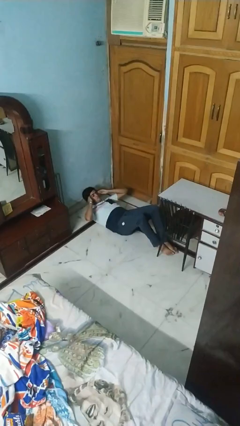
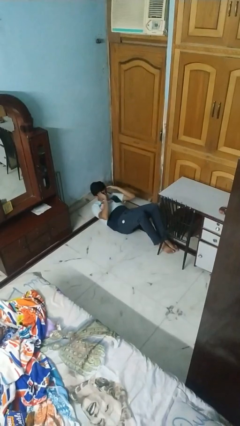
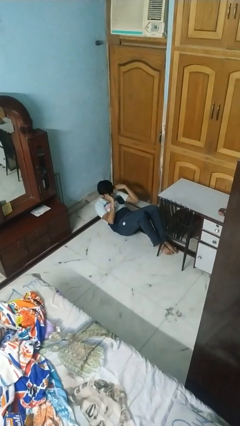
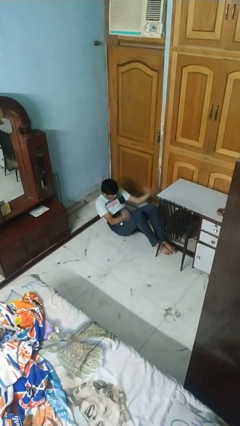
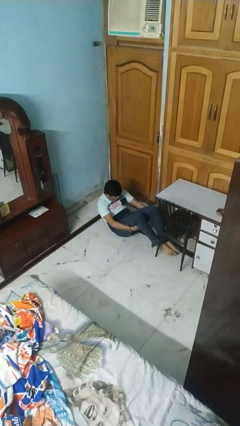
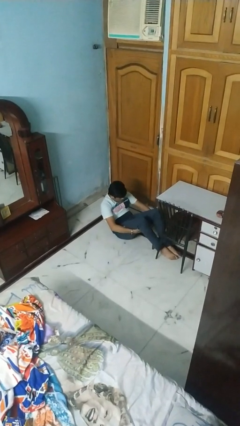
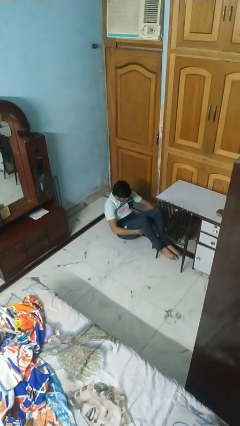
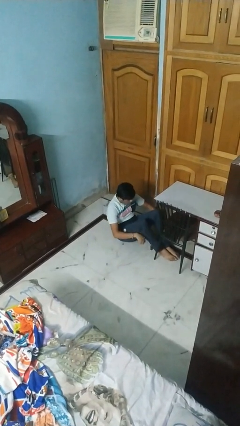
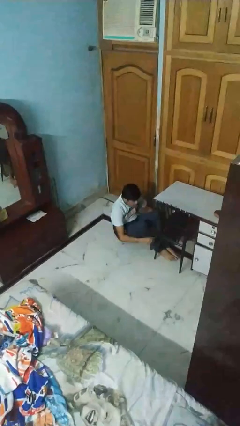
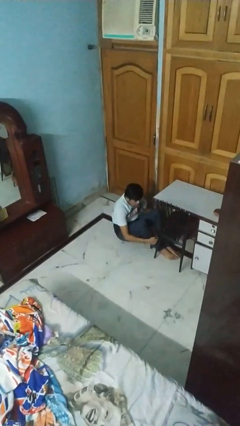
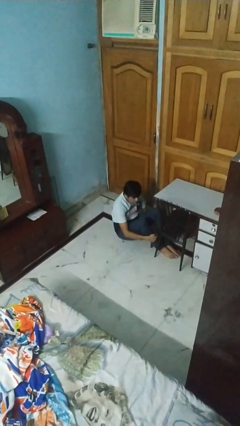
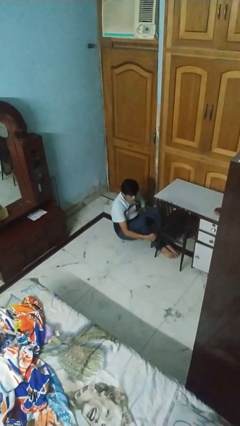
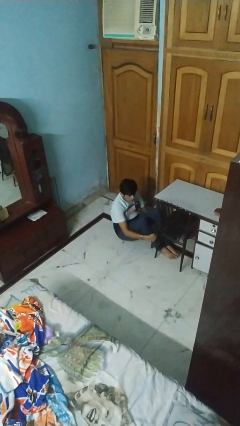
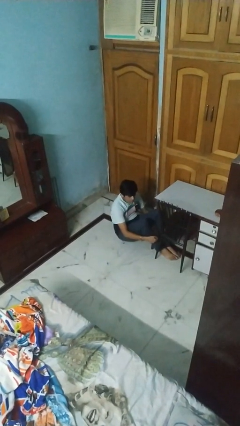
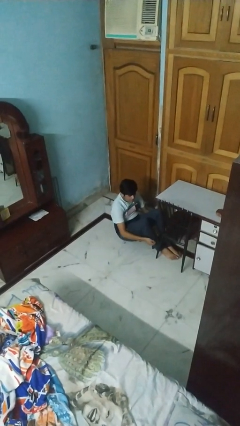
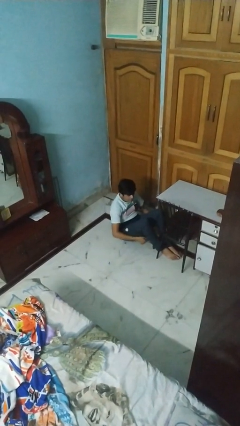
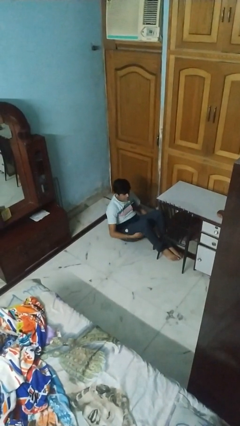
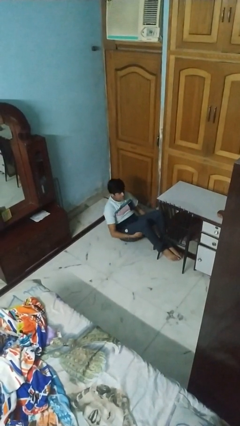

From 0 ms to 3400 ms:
person exercises with situp

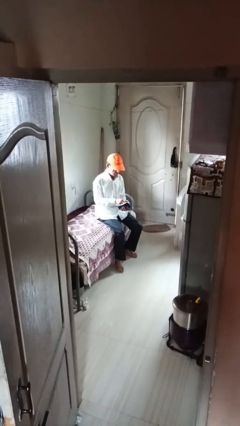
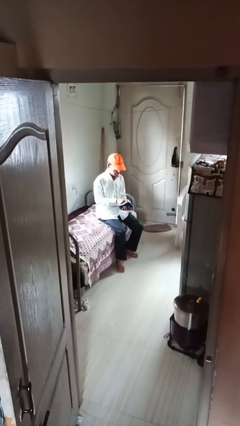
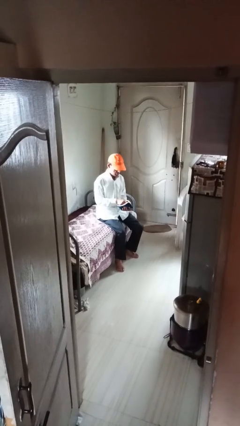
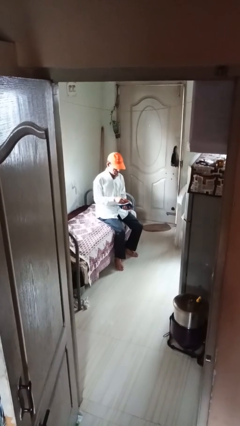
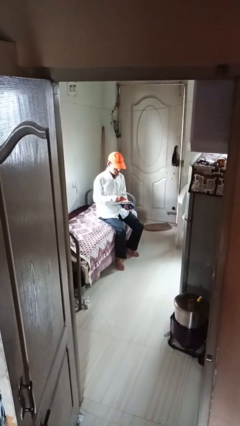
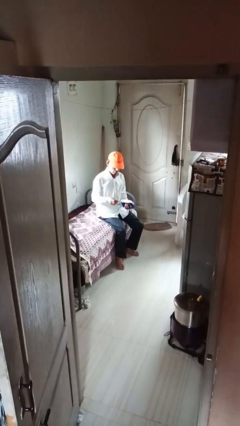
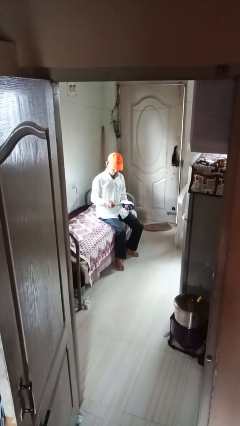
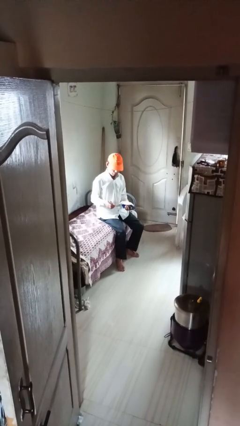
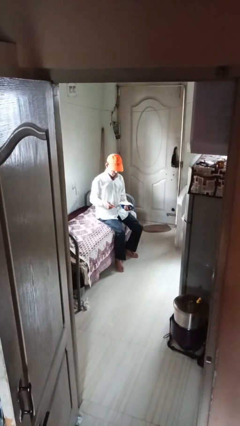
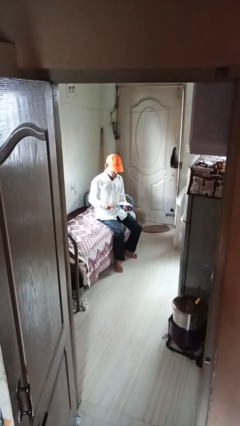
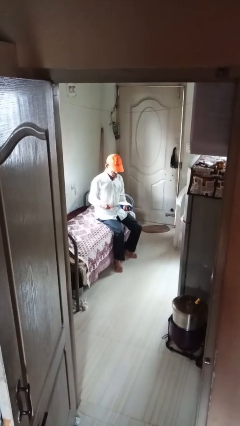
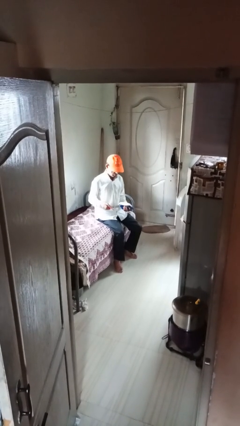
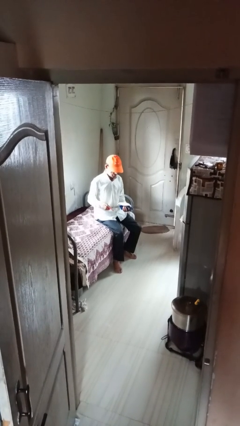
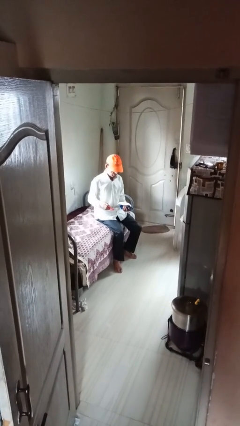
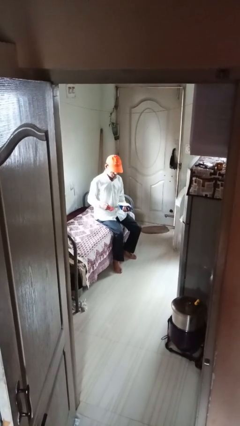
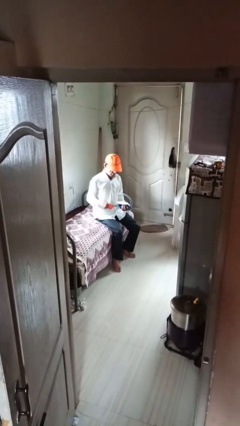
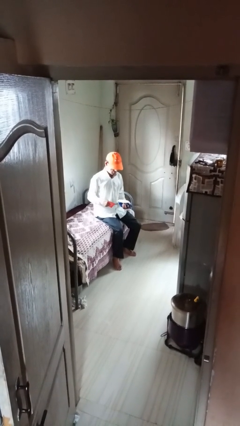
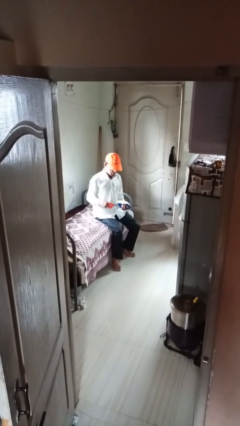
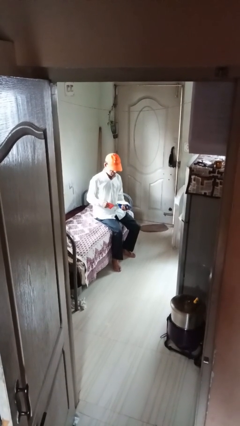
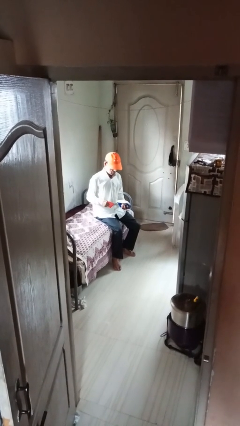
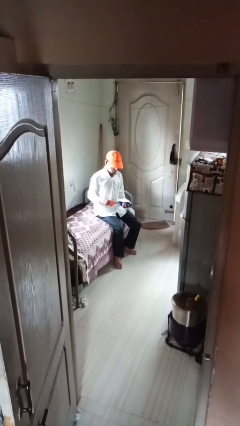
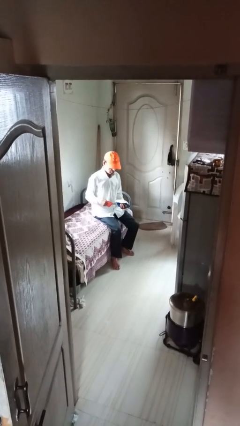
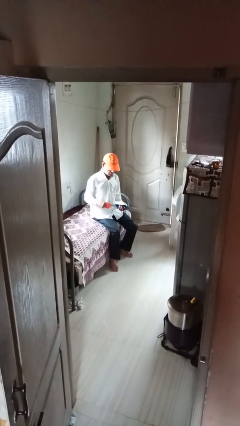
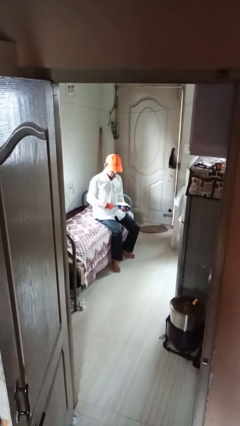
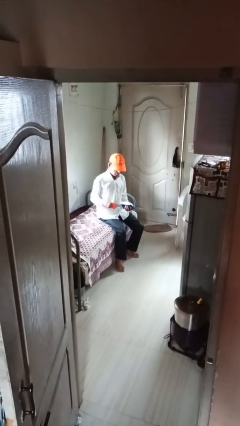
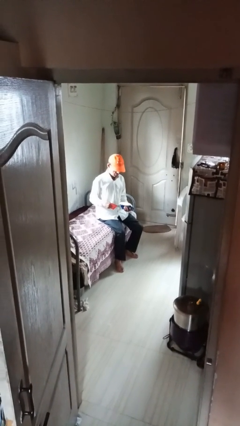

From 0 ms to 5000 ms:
person takes object from purse

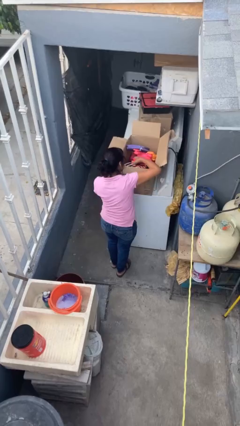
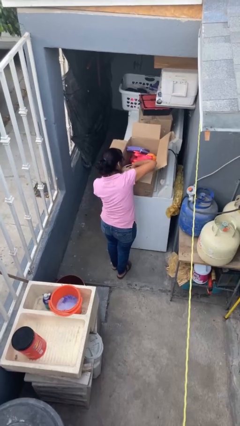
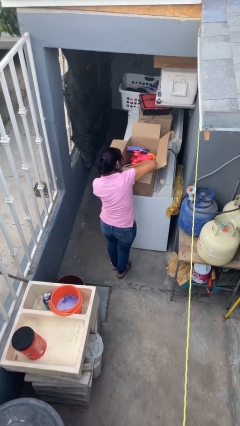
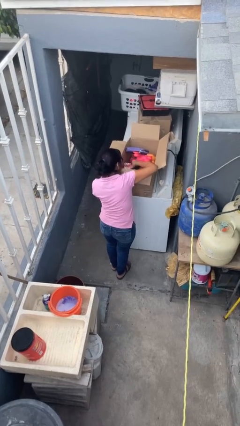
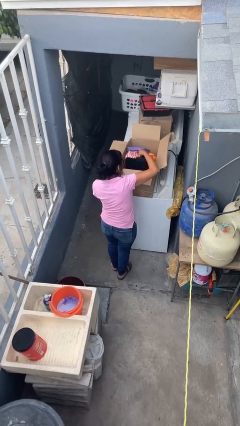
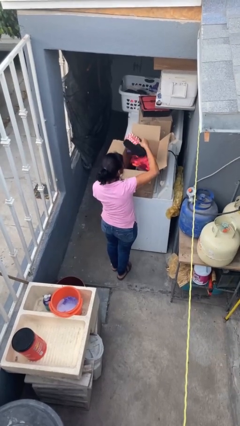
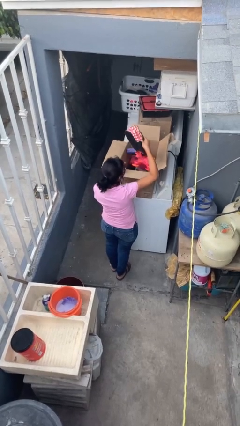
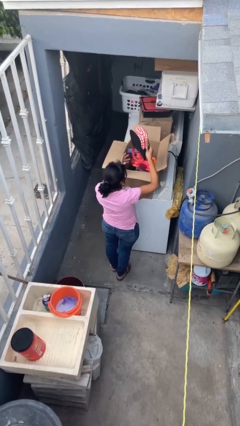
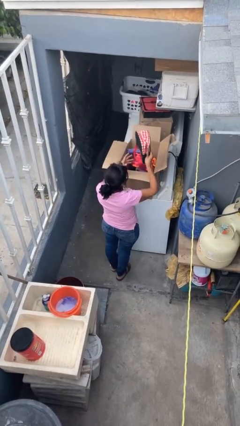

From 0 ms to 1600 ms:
person takes object from box

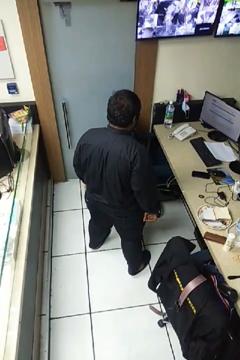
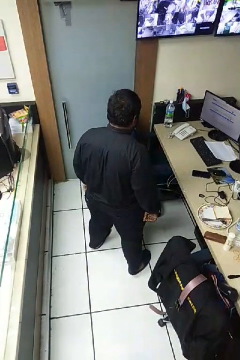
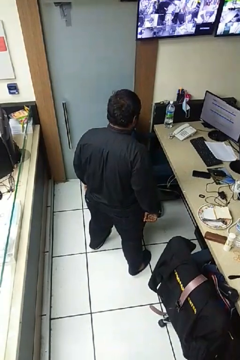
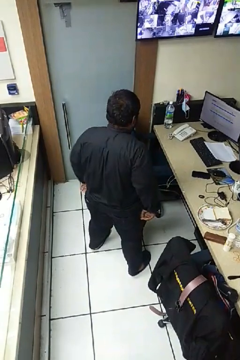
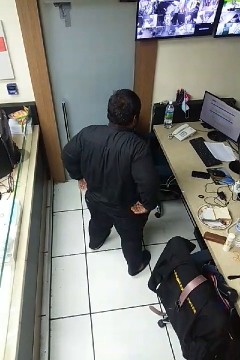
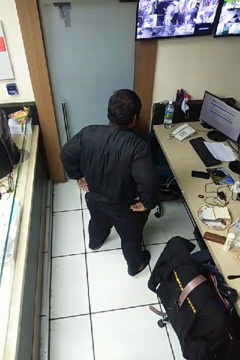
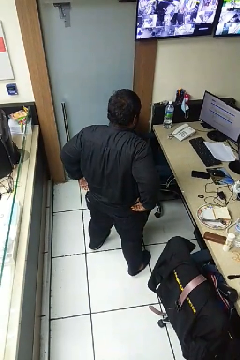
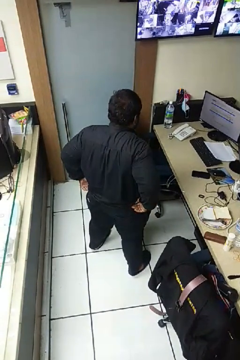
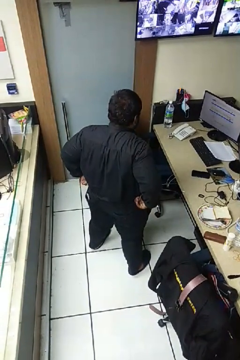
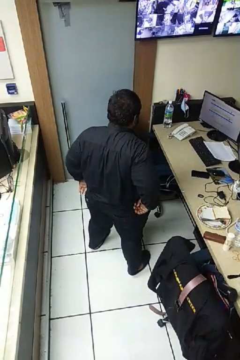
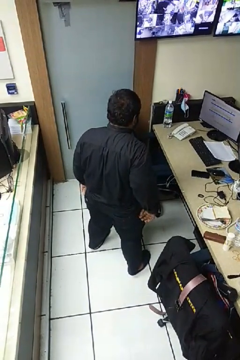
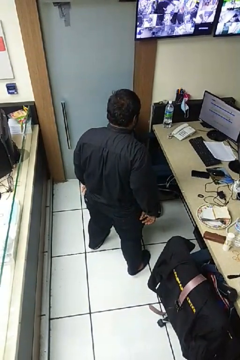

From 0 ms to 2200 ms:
person hikes up pants

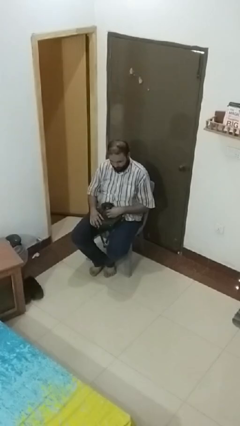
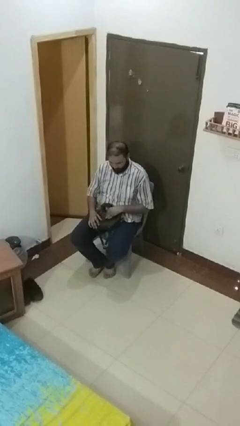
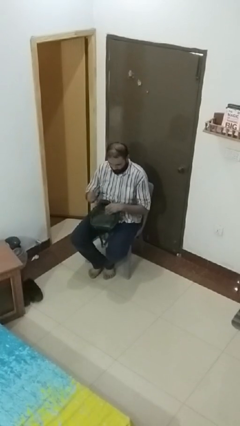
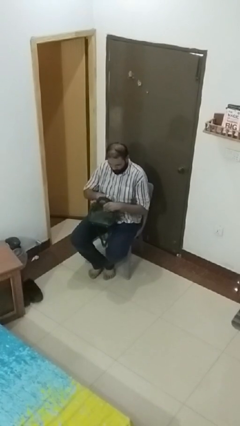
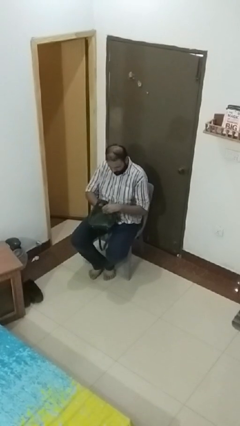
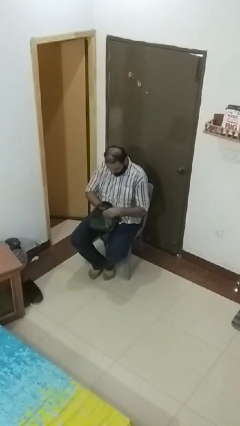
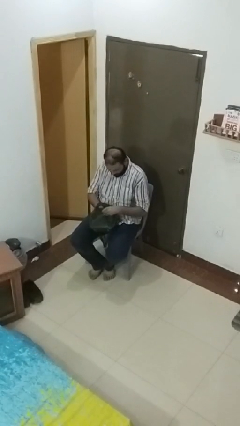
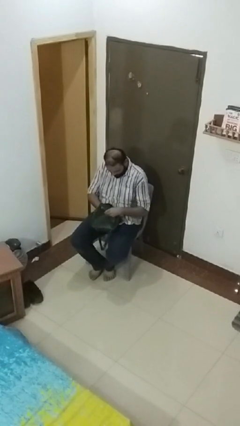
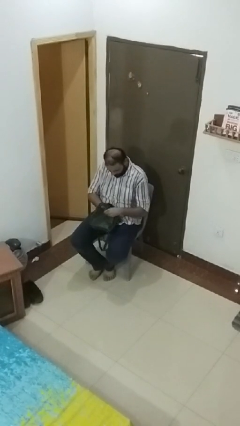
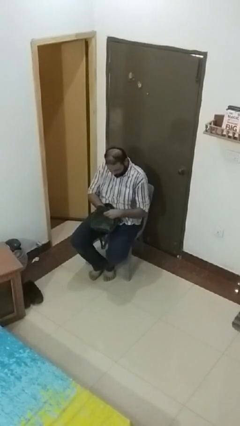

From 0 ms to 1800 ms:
person searches in purse

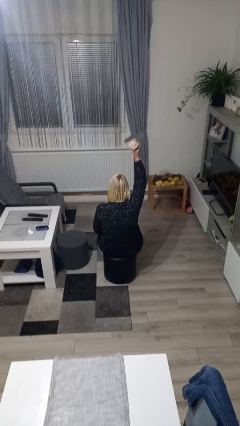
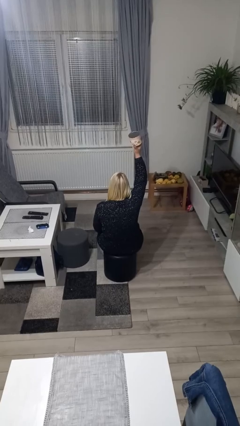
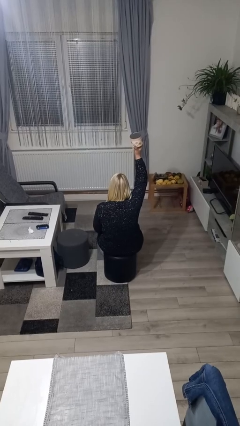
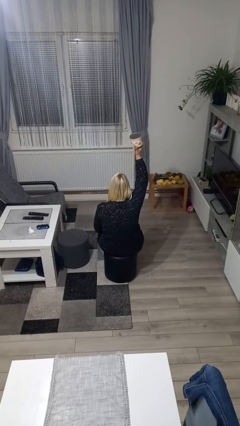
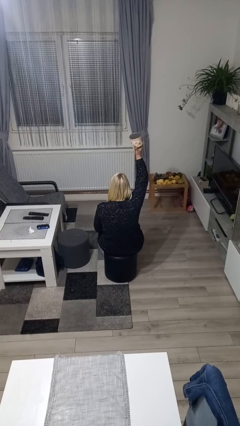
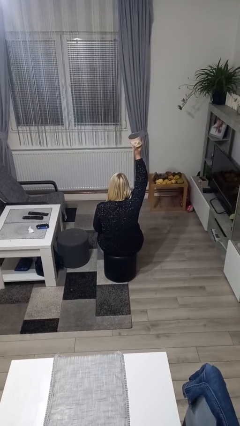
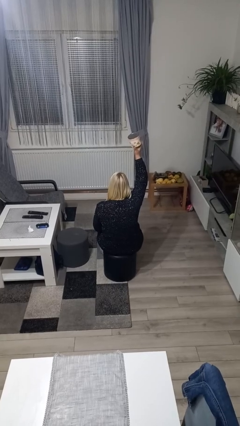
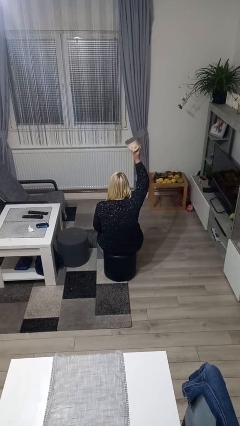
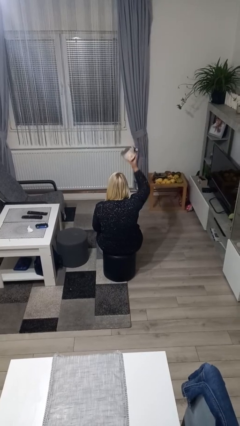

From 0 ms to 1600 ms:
person holds object above head

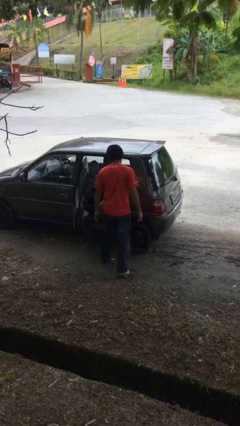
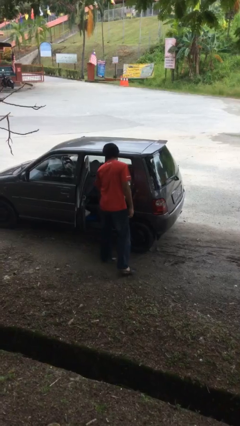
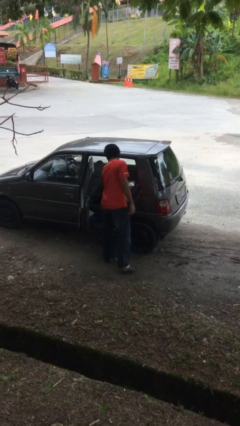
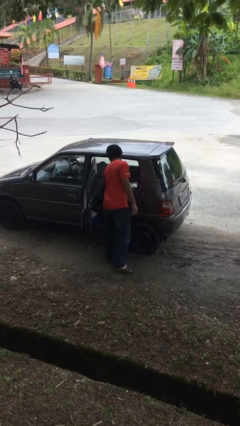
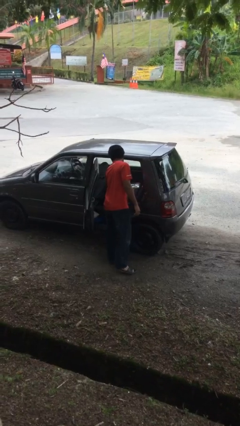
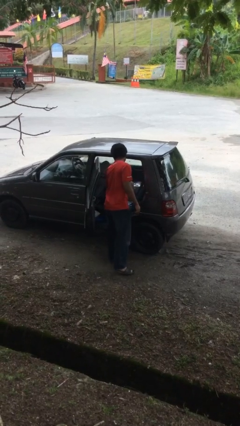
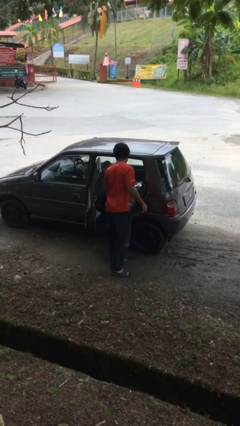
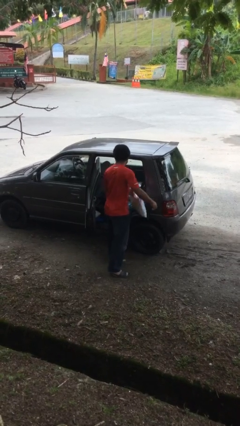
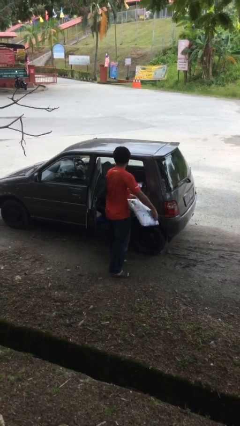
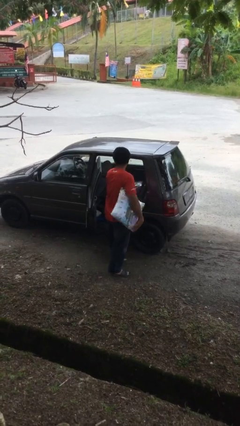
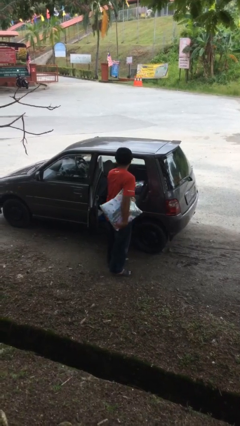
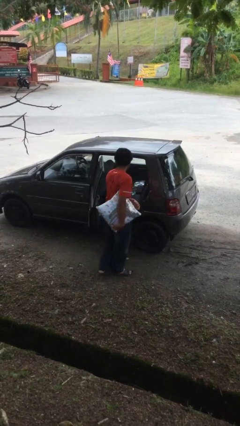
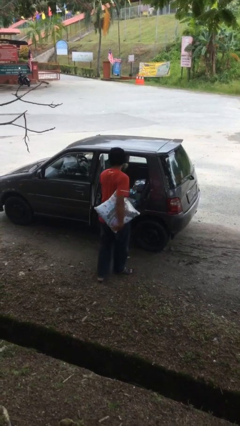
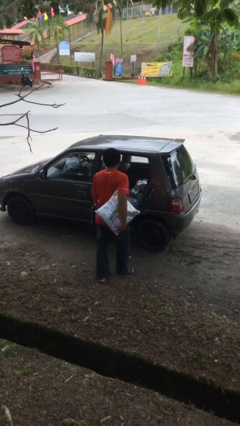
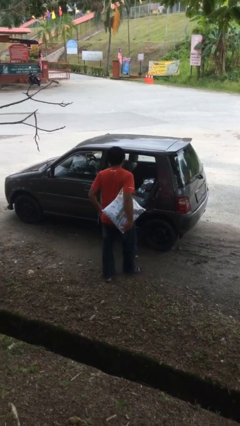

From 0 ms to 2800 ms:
person unloads car
